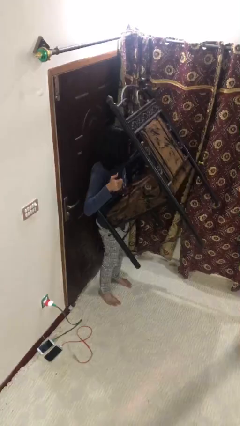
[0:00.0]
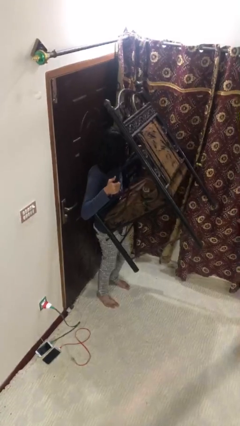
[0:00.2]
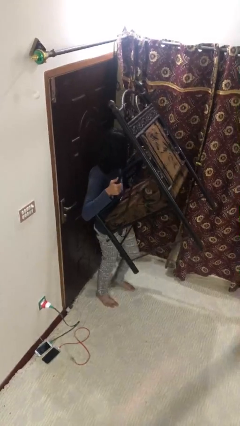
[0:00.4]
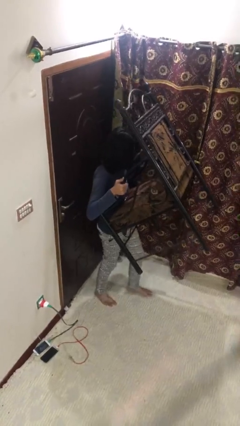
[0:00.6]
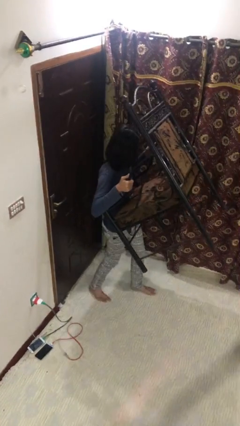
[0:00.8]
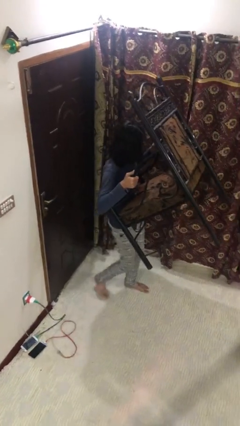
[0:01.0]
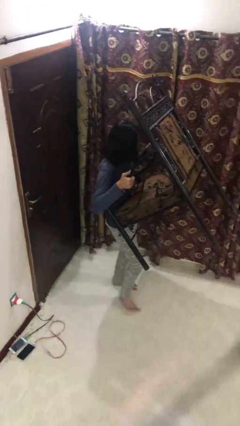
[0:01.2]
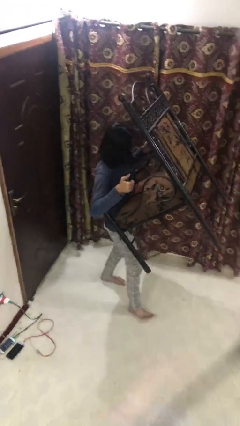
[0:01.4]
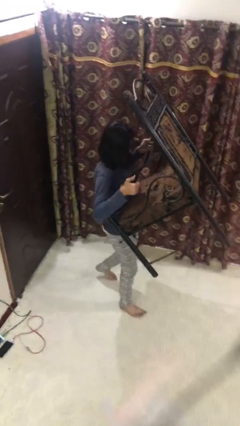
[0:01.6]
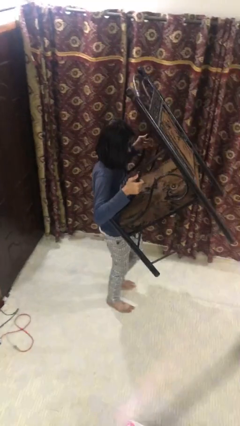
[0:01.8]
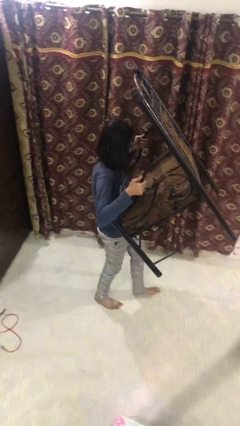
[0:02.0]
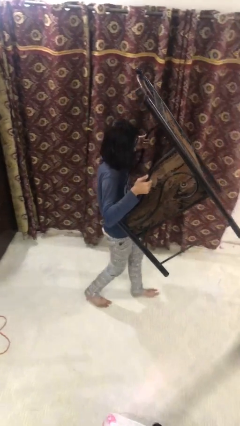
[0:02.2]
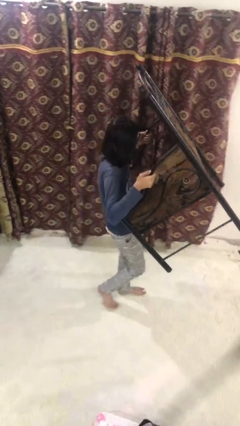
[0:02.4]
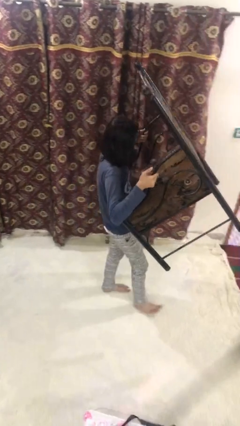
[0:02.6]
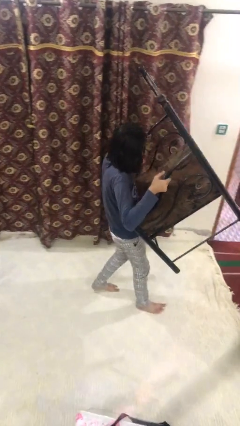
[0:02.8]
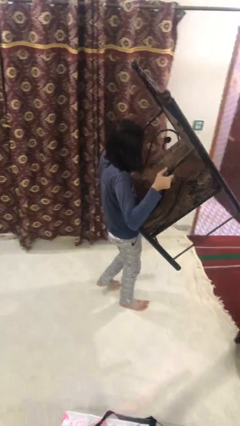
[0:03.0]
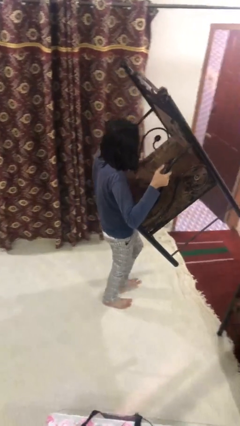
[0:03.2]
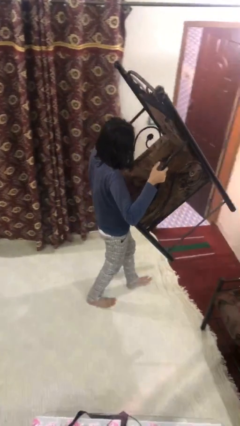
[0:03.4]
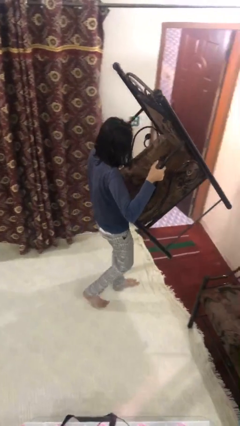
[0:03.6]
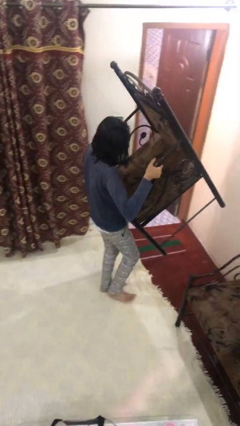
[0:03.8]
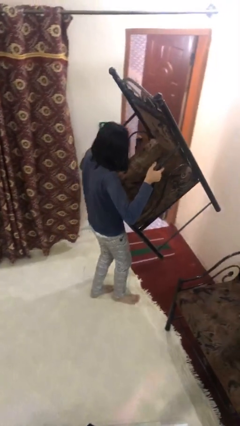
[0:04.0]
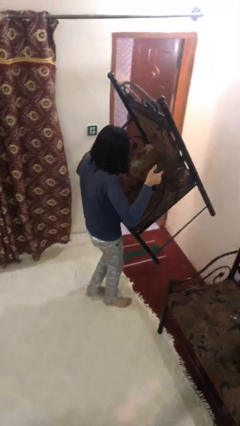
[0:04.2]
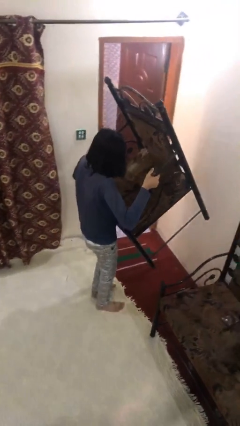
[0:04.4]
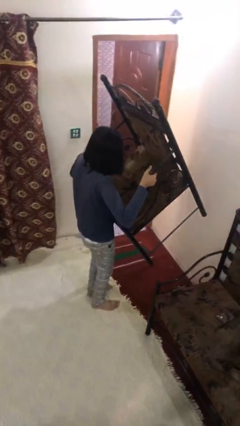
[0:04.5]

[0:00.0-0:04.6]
person carries heavy object

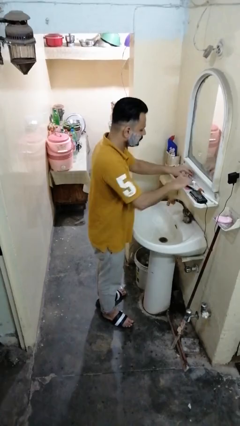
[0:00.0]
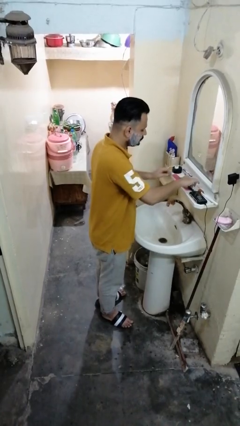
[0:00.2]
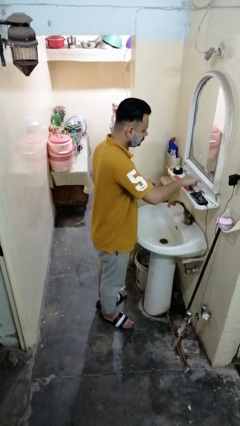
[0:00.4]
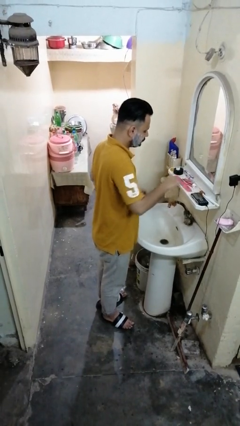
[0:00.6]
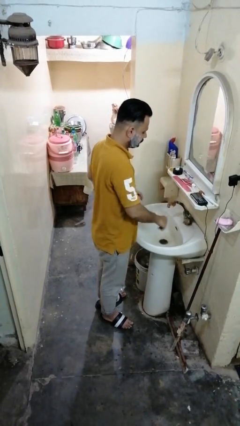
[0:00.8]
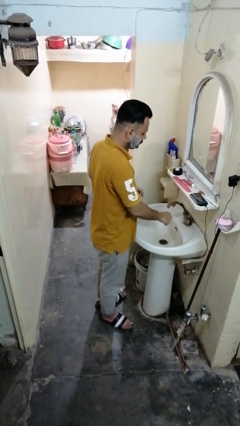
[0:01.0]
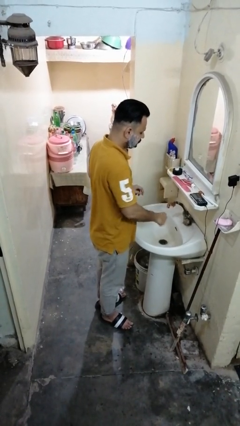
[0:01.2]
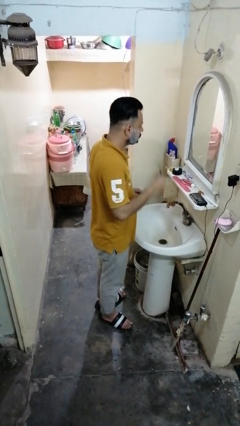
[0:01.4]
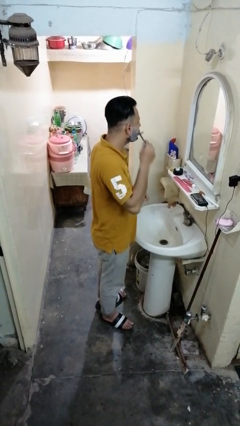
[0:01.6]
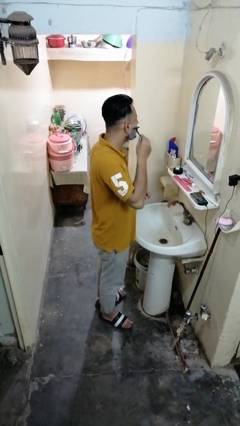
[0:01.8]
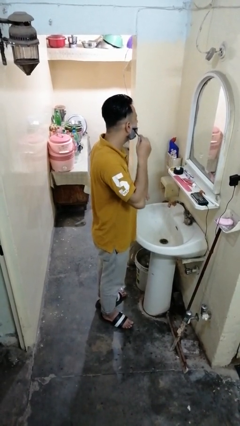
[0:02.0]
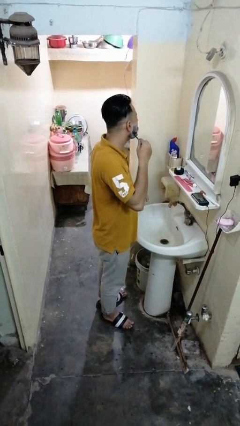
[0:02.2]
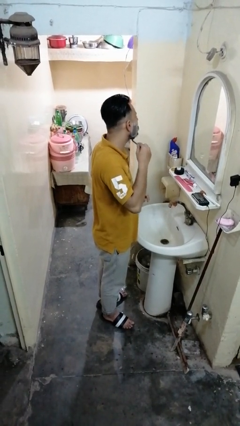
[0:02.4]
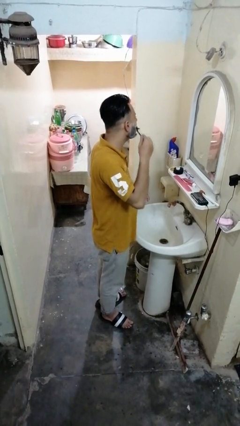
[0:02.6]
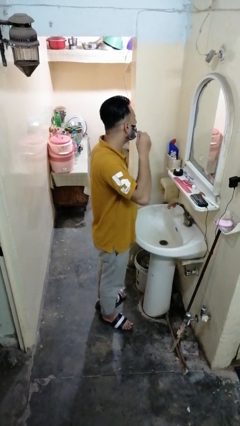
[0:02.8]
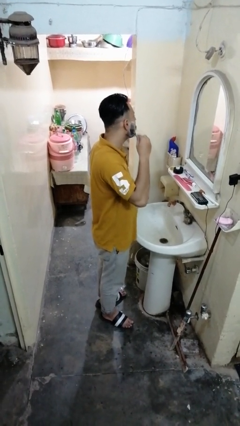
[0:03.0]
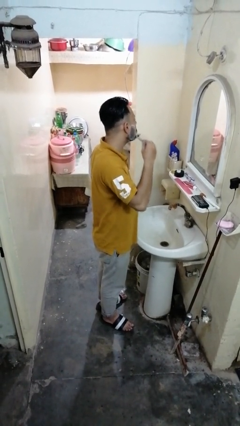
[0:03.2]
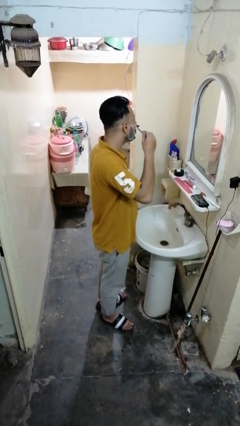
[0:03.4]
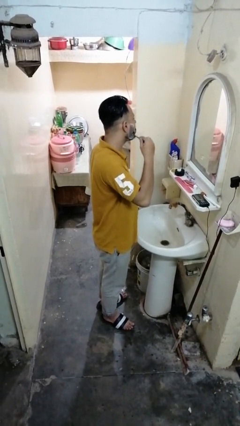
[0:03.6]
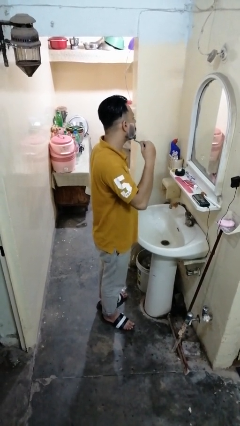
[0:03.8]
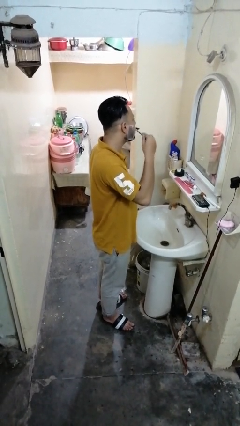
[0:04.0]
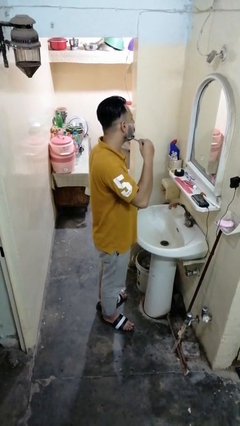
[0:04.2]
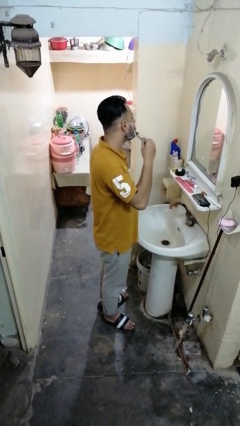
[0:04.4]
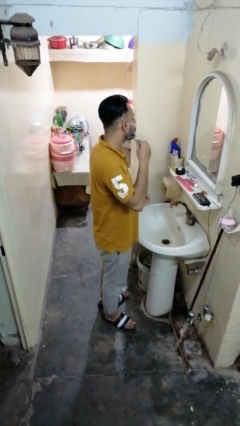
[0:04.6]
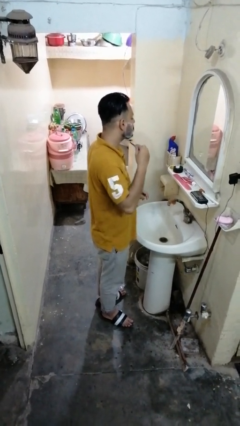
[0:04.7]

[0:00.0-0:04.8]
person shaves face

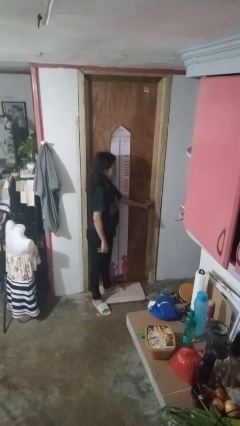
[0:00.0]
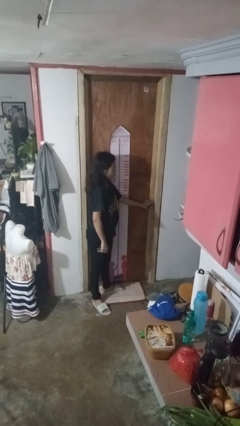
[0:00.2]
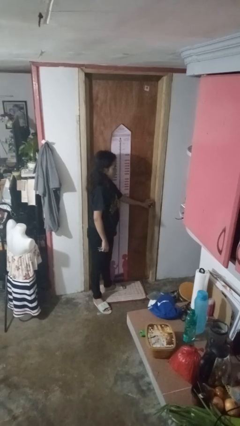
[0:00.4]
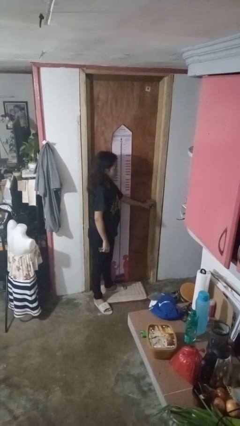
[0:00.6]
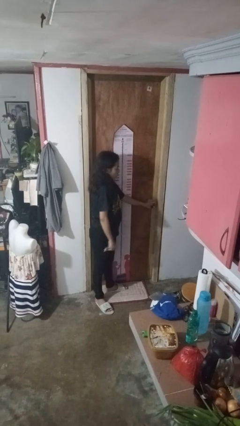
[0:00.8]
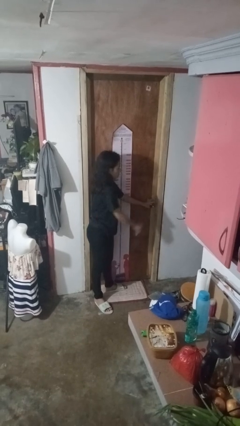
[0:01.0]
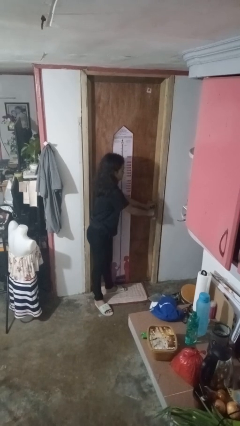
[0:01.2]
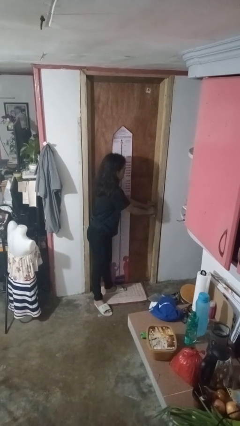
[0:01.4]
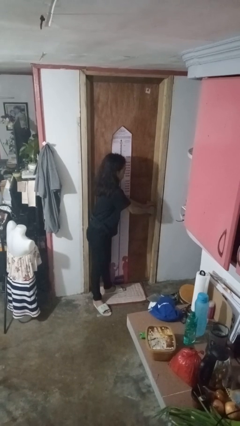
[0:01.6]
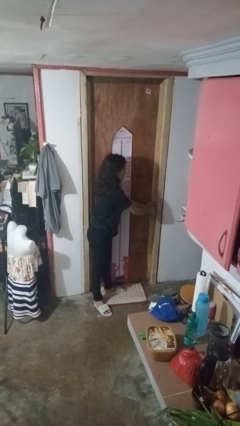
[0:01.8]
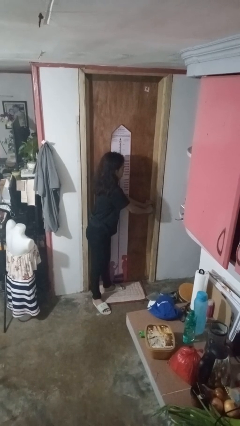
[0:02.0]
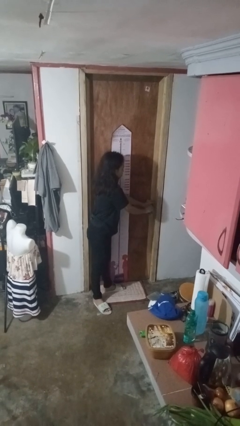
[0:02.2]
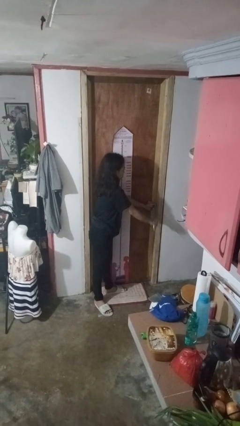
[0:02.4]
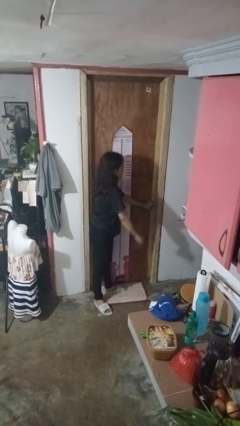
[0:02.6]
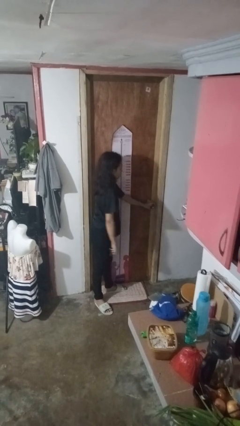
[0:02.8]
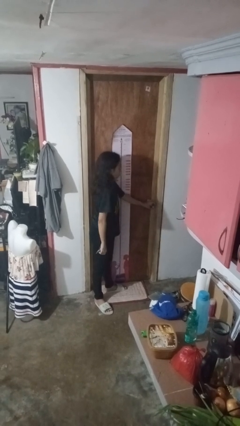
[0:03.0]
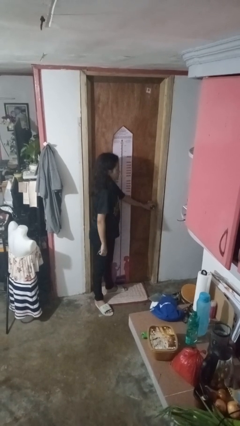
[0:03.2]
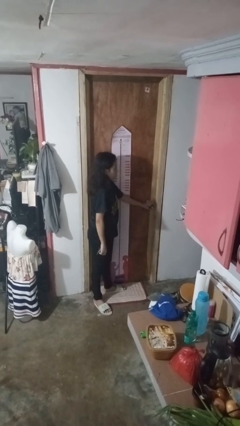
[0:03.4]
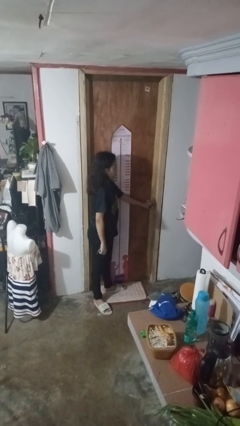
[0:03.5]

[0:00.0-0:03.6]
person locks door with keys

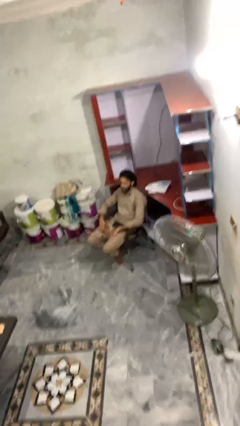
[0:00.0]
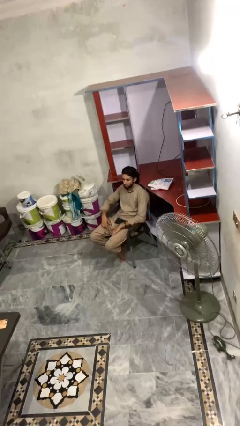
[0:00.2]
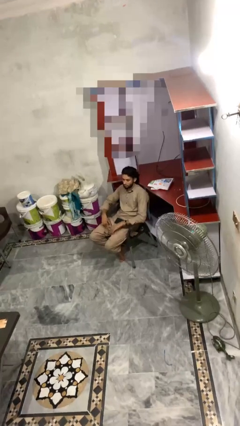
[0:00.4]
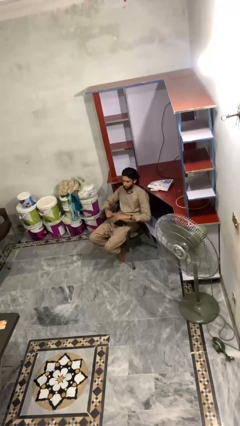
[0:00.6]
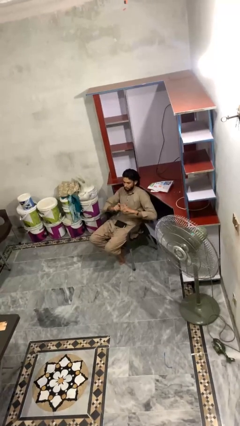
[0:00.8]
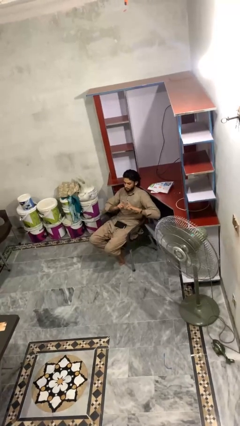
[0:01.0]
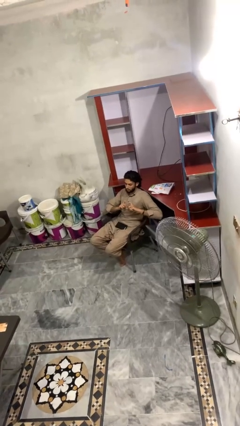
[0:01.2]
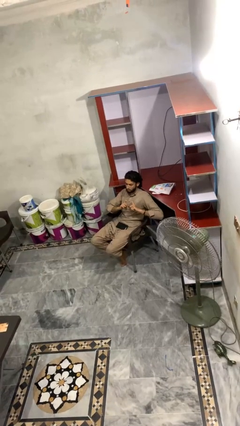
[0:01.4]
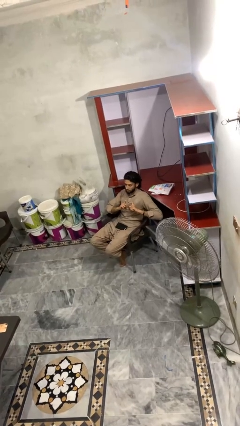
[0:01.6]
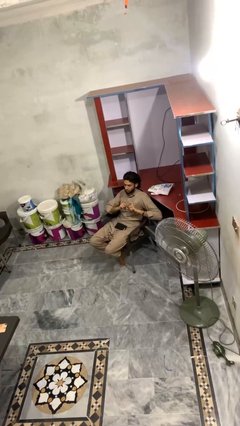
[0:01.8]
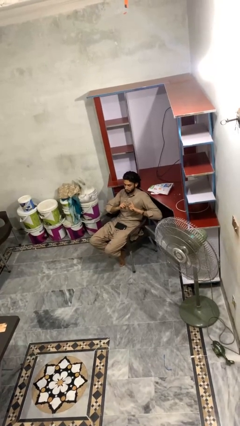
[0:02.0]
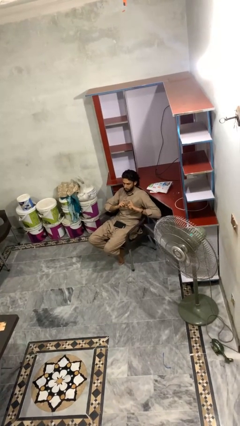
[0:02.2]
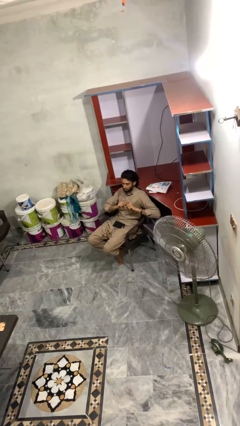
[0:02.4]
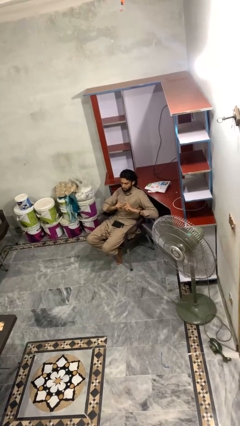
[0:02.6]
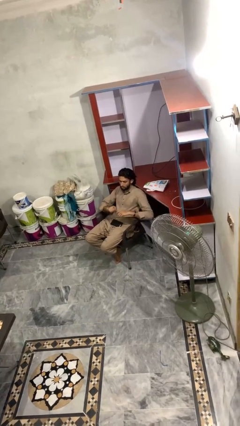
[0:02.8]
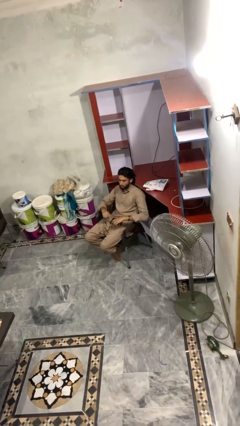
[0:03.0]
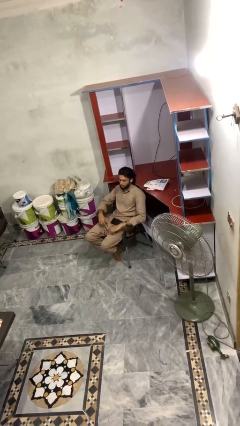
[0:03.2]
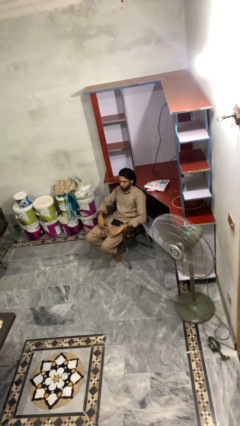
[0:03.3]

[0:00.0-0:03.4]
person gestures heart

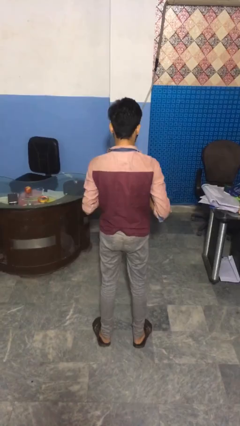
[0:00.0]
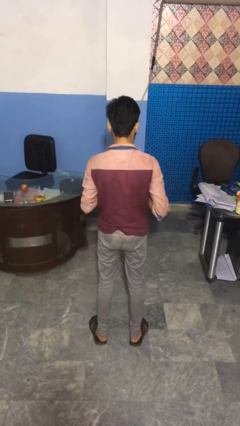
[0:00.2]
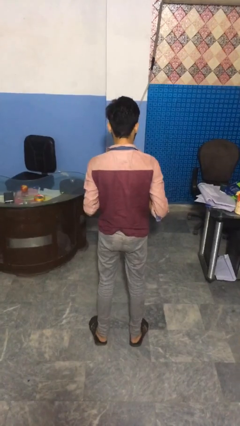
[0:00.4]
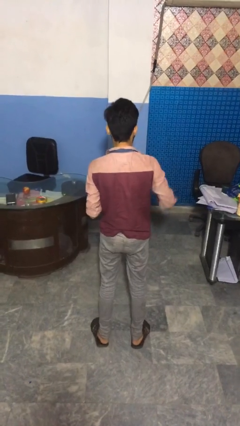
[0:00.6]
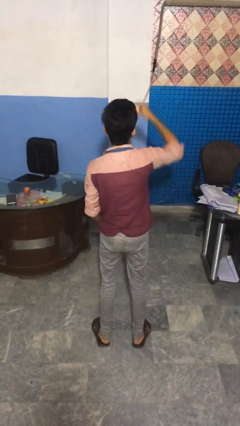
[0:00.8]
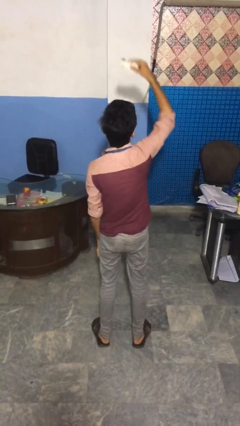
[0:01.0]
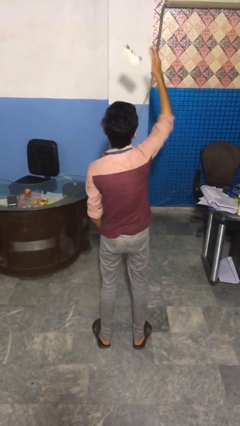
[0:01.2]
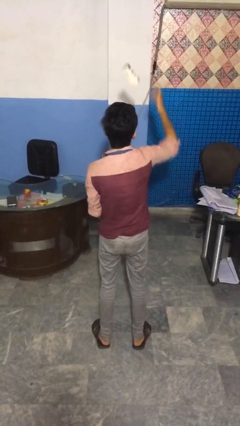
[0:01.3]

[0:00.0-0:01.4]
person drops object
